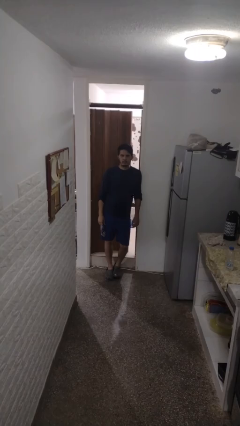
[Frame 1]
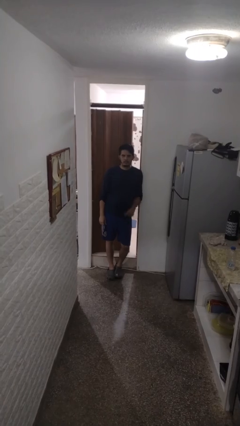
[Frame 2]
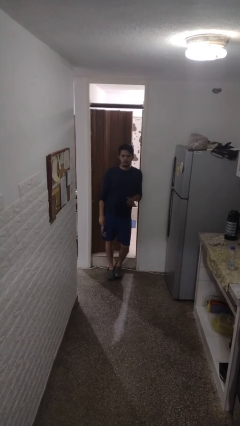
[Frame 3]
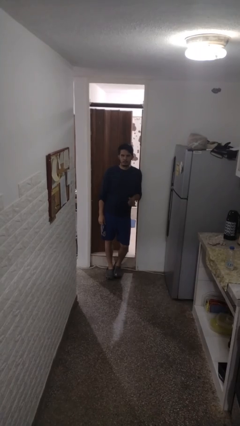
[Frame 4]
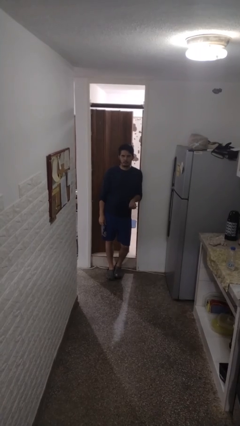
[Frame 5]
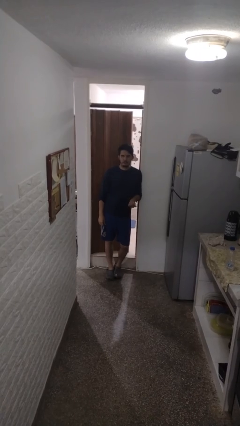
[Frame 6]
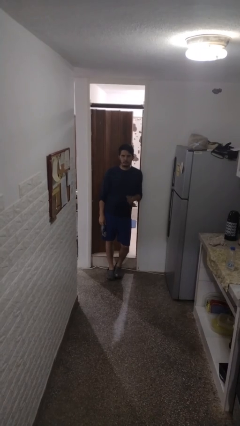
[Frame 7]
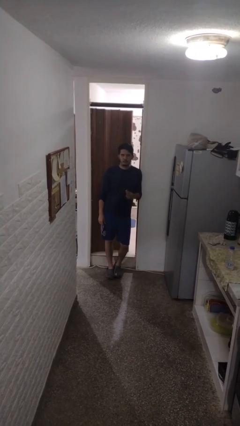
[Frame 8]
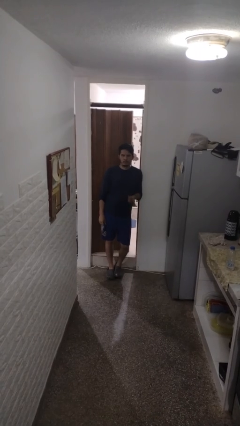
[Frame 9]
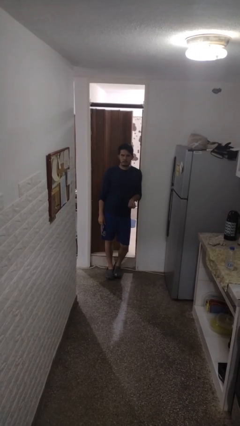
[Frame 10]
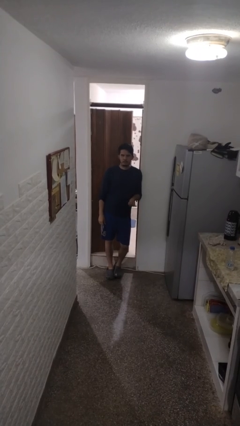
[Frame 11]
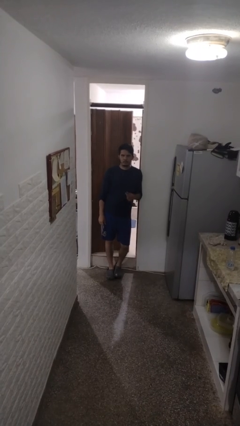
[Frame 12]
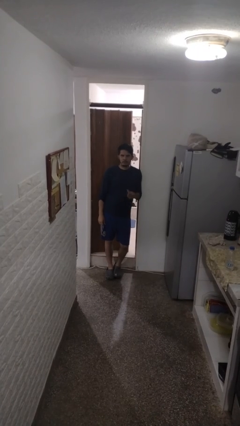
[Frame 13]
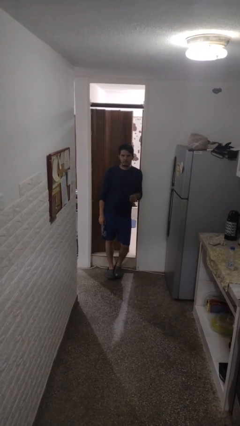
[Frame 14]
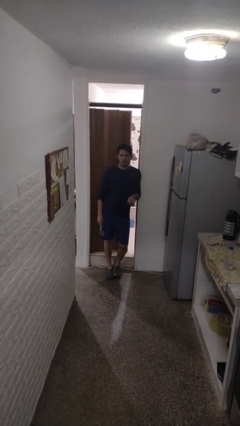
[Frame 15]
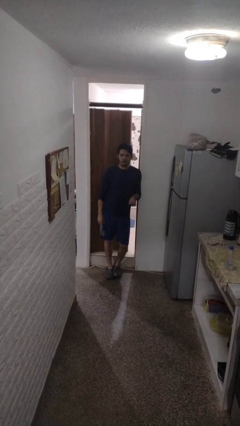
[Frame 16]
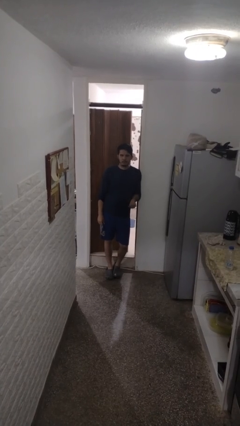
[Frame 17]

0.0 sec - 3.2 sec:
person snaps fingers

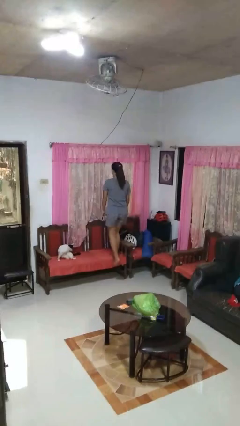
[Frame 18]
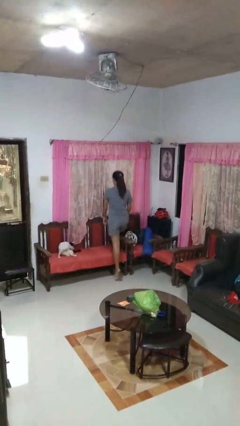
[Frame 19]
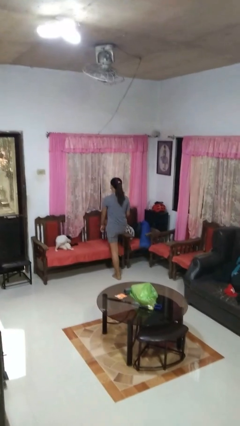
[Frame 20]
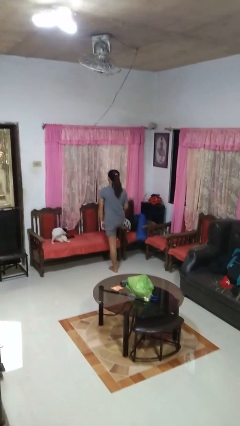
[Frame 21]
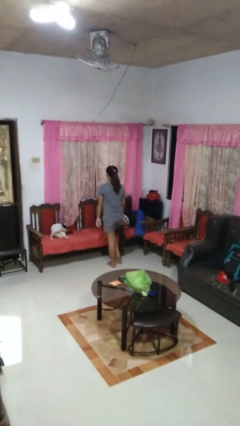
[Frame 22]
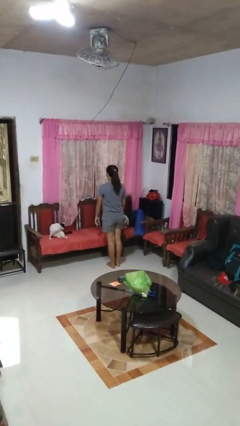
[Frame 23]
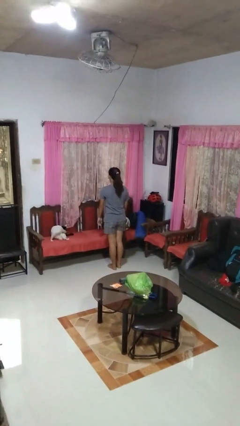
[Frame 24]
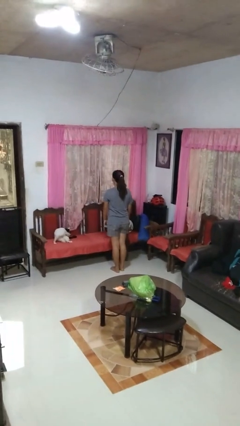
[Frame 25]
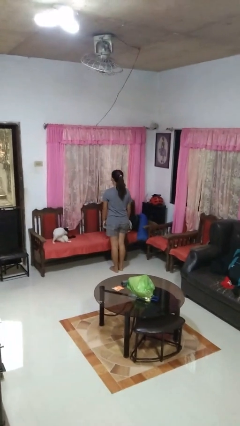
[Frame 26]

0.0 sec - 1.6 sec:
person climbs off chair

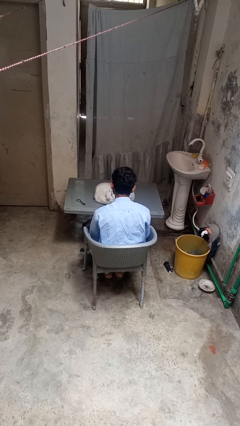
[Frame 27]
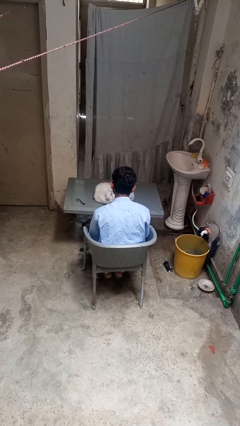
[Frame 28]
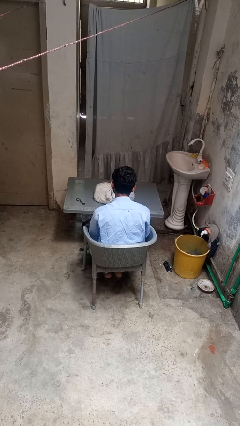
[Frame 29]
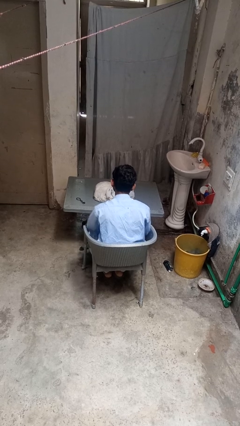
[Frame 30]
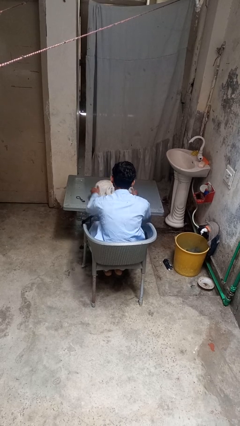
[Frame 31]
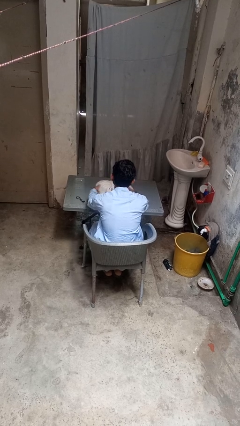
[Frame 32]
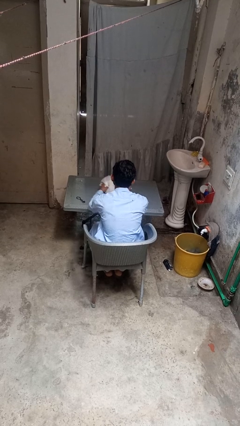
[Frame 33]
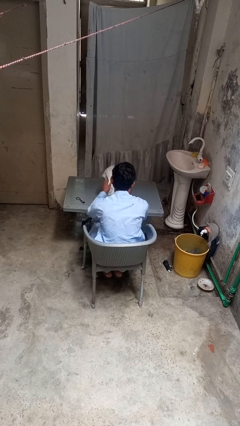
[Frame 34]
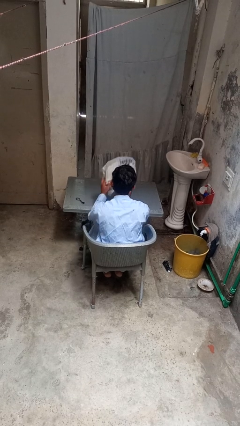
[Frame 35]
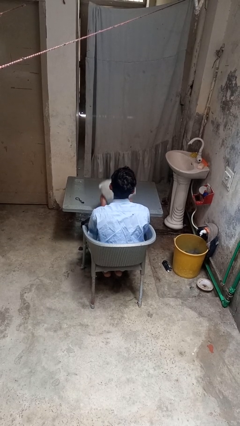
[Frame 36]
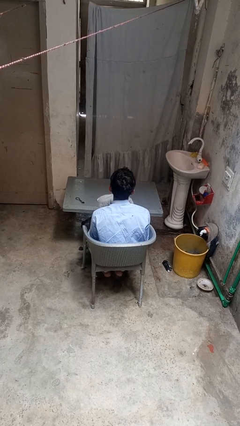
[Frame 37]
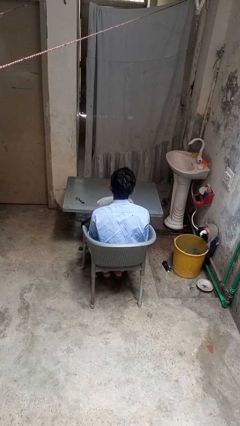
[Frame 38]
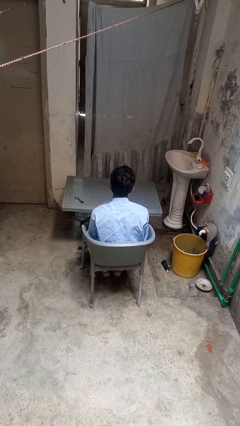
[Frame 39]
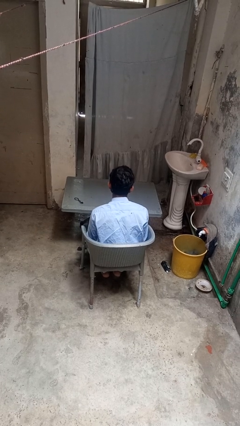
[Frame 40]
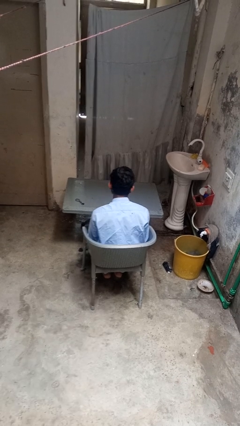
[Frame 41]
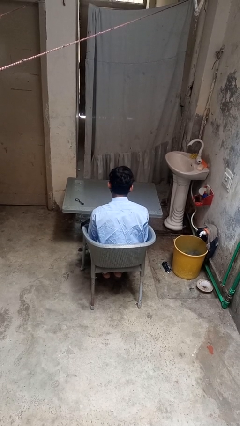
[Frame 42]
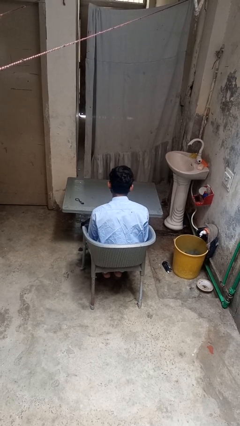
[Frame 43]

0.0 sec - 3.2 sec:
person picks up object from table

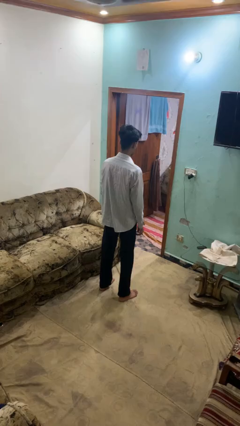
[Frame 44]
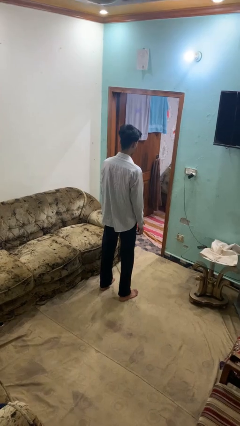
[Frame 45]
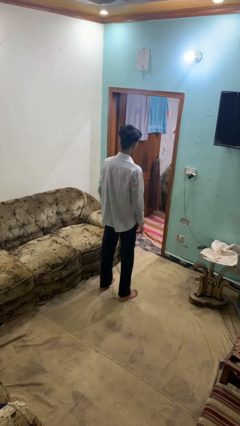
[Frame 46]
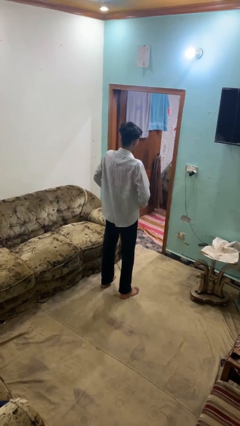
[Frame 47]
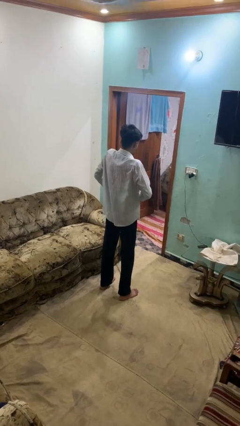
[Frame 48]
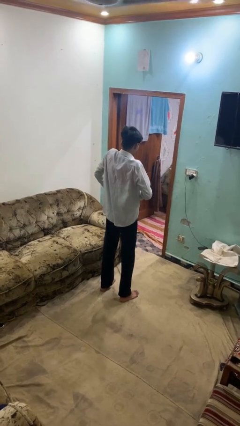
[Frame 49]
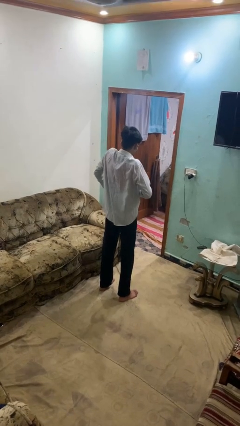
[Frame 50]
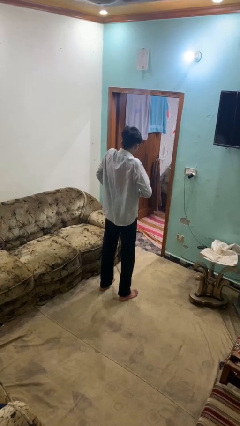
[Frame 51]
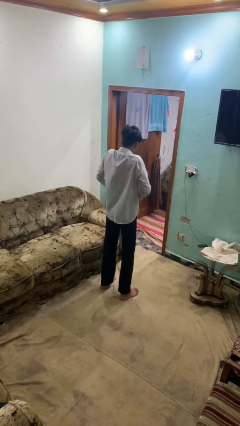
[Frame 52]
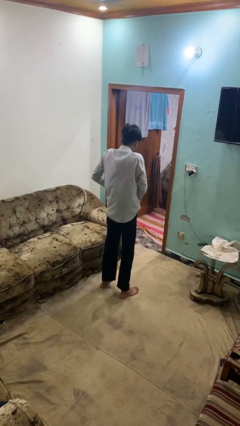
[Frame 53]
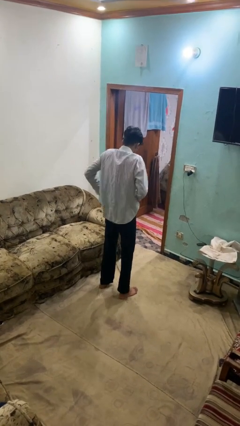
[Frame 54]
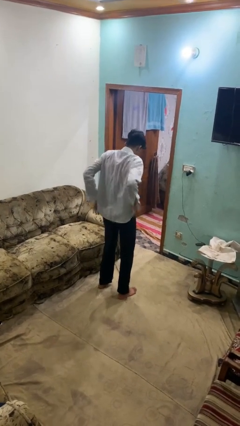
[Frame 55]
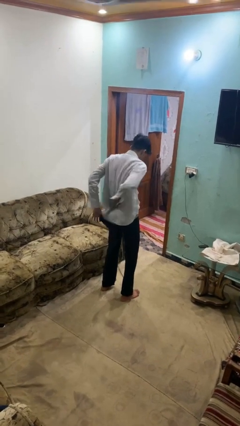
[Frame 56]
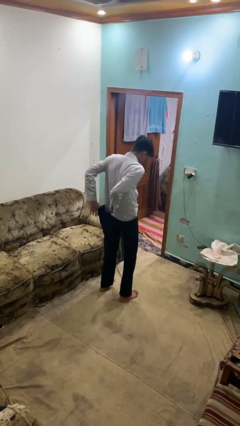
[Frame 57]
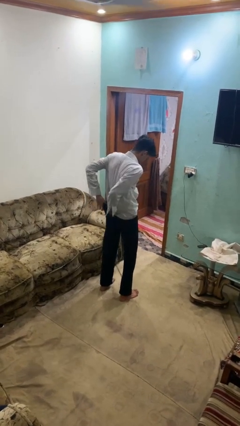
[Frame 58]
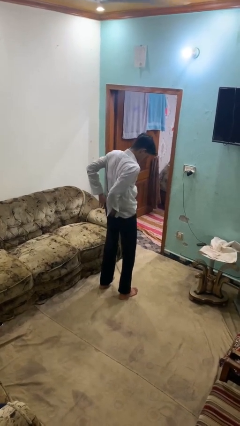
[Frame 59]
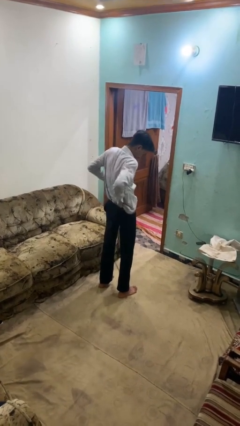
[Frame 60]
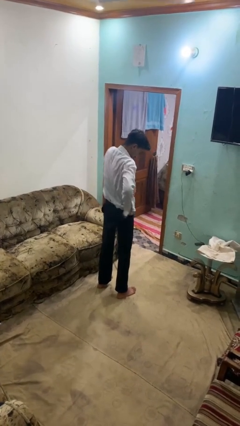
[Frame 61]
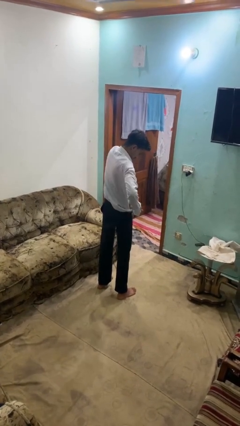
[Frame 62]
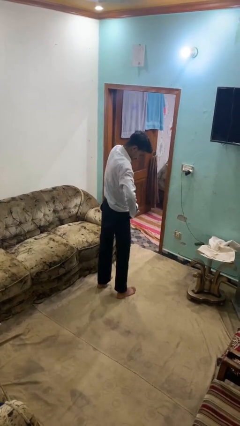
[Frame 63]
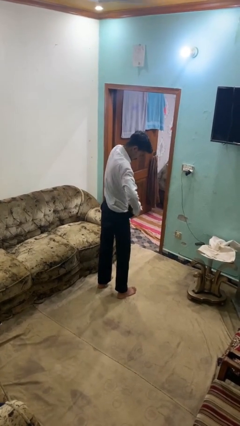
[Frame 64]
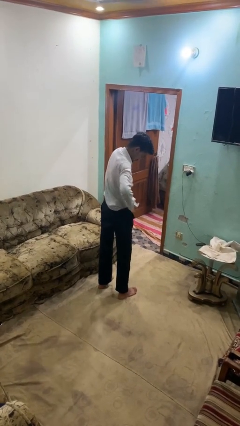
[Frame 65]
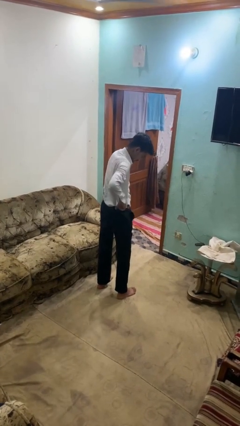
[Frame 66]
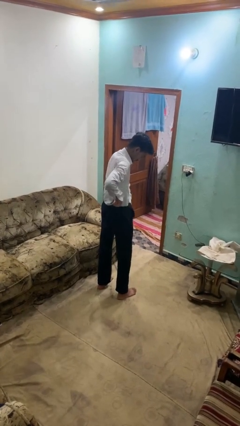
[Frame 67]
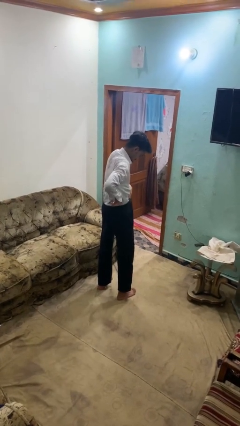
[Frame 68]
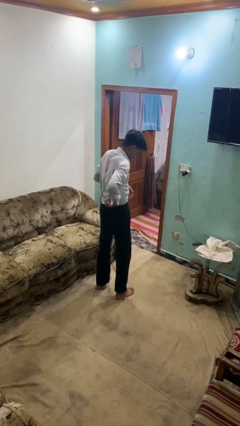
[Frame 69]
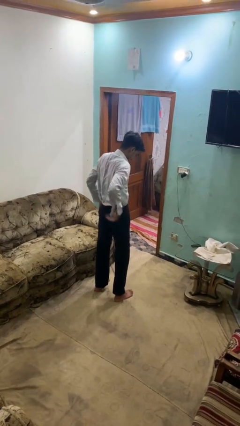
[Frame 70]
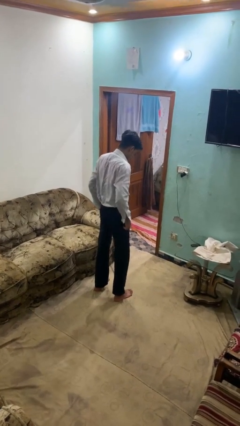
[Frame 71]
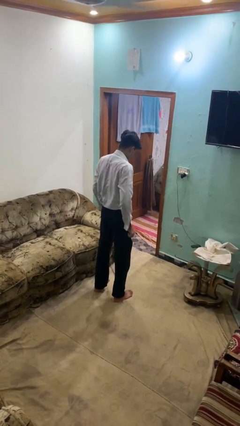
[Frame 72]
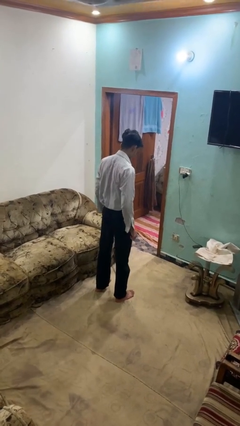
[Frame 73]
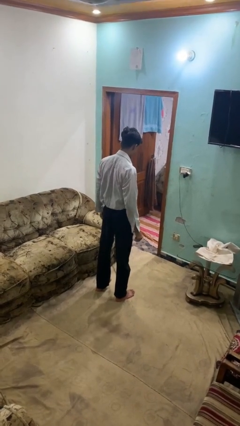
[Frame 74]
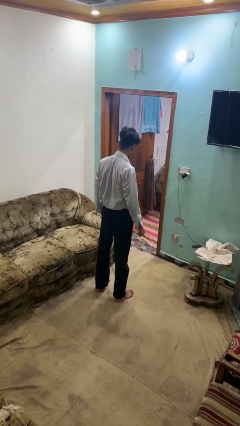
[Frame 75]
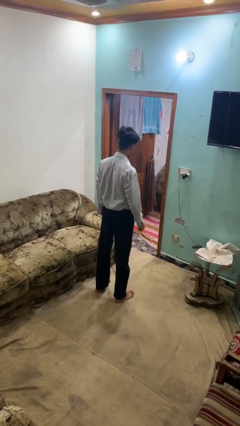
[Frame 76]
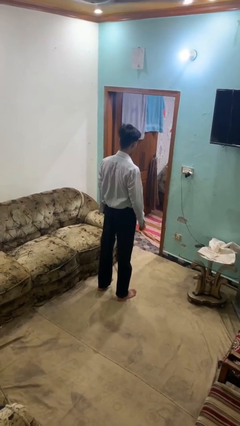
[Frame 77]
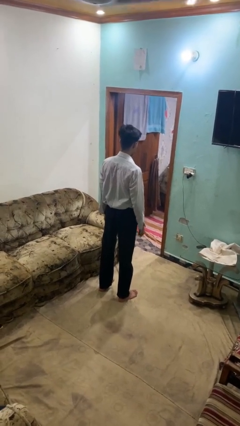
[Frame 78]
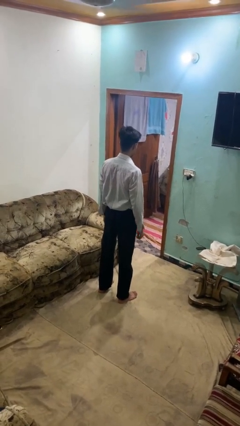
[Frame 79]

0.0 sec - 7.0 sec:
person tucks in shirt

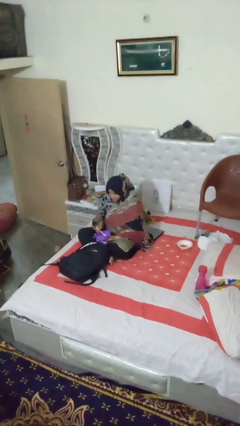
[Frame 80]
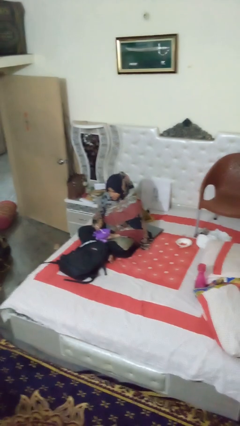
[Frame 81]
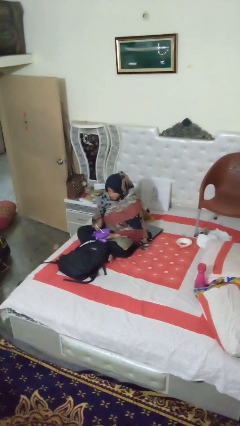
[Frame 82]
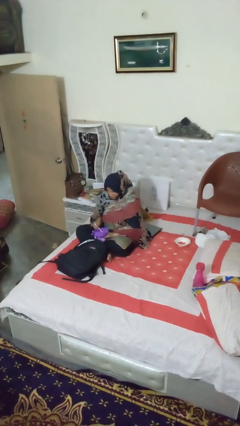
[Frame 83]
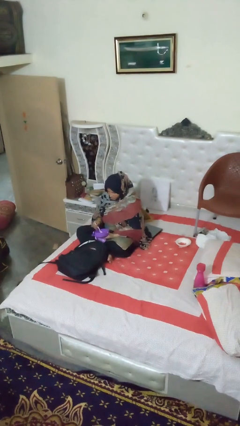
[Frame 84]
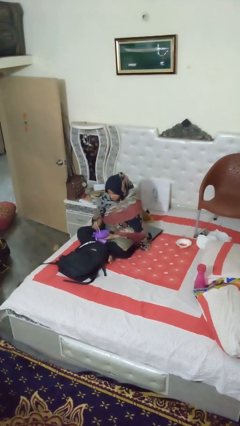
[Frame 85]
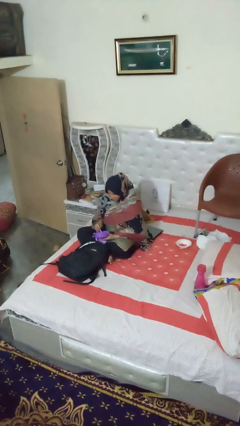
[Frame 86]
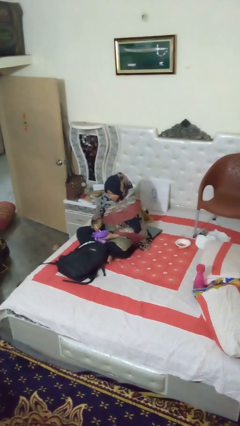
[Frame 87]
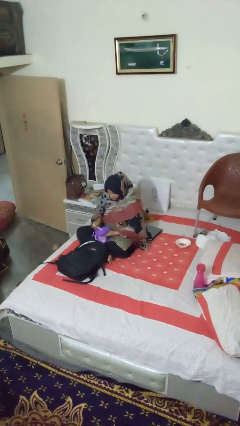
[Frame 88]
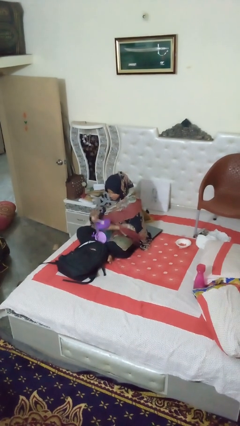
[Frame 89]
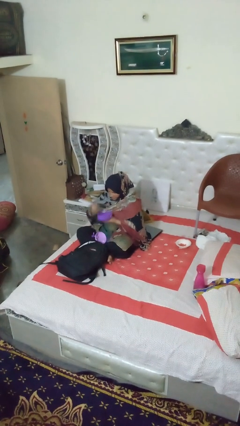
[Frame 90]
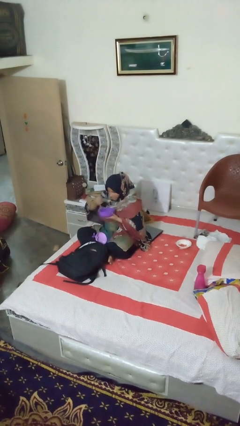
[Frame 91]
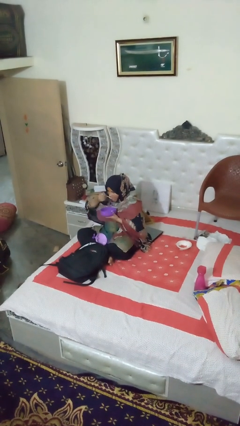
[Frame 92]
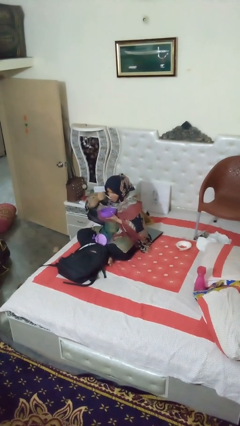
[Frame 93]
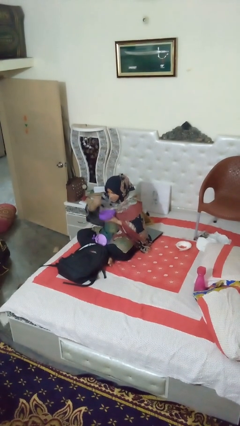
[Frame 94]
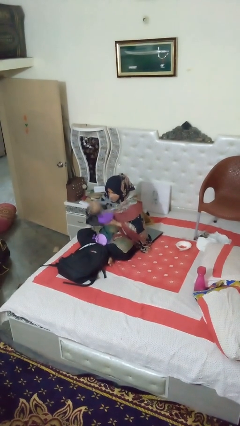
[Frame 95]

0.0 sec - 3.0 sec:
person eats snack from bag
